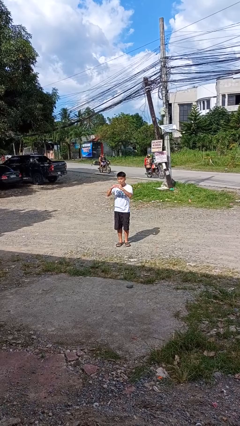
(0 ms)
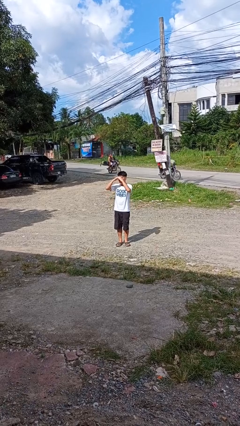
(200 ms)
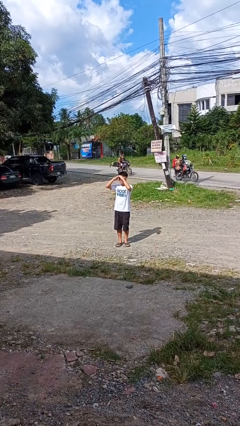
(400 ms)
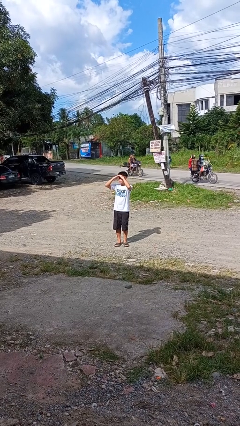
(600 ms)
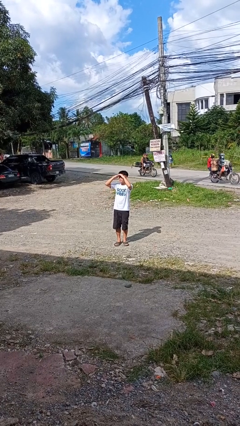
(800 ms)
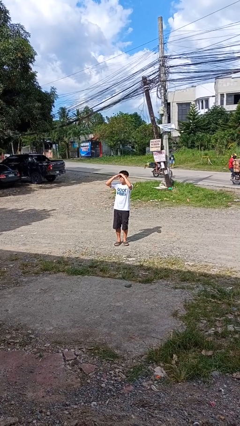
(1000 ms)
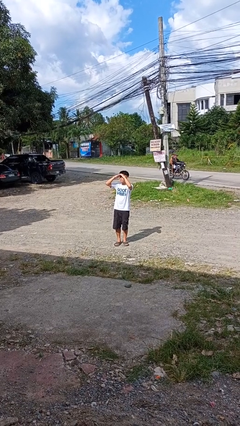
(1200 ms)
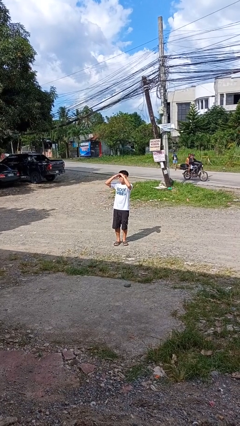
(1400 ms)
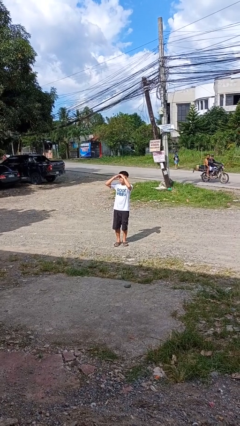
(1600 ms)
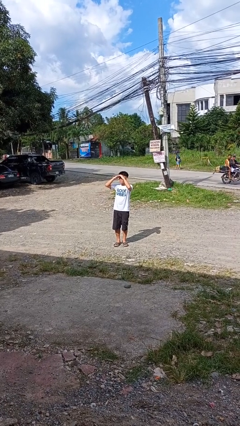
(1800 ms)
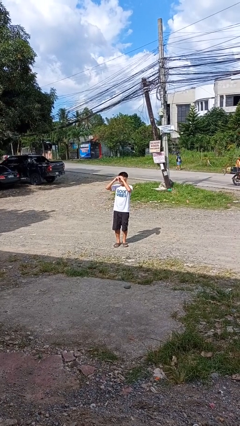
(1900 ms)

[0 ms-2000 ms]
person shades eyes

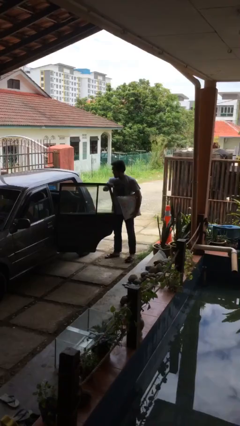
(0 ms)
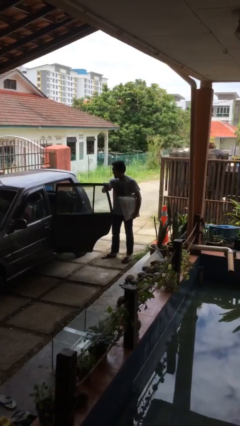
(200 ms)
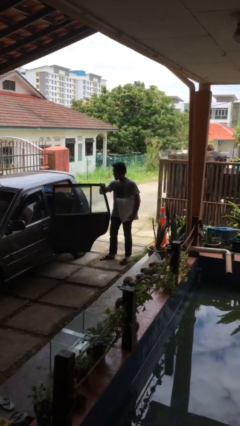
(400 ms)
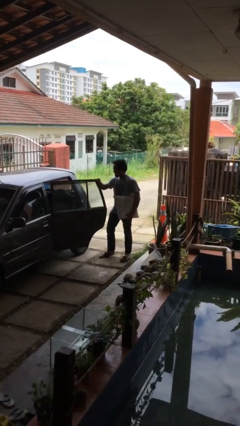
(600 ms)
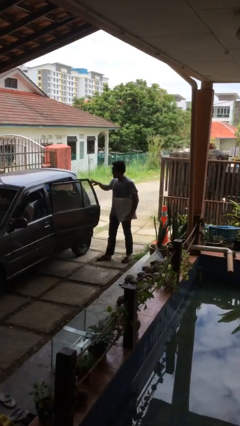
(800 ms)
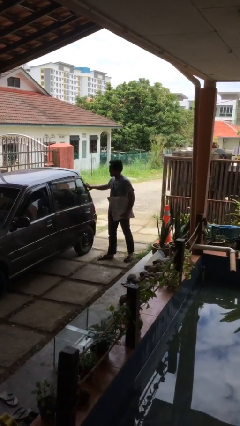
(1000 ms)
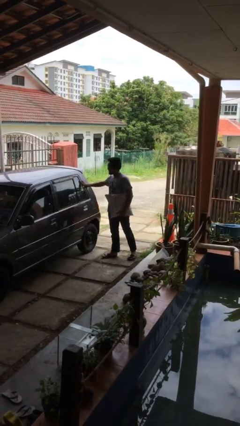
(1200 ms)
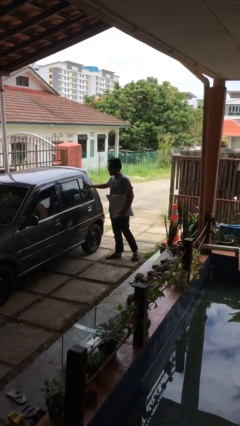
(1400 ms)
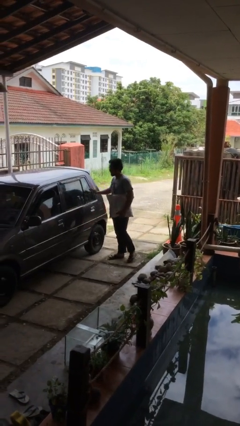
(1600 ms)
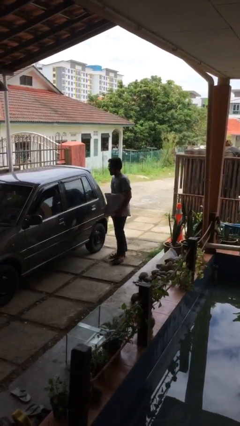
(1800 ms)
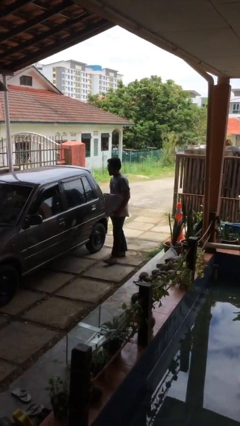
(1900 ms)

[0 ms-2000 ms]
person closes car door

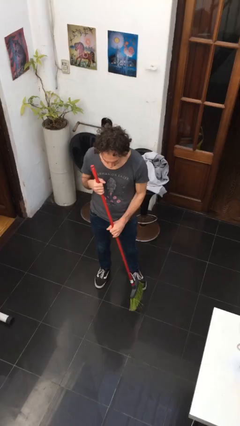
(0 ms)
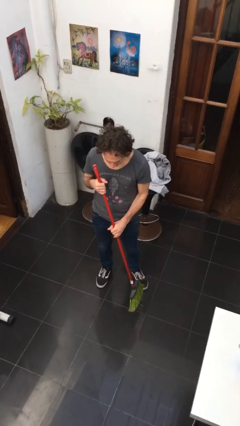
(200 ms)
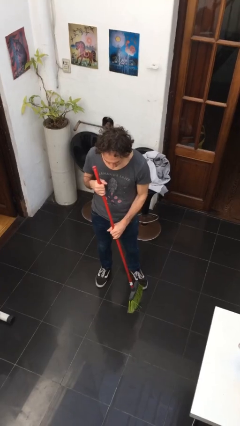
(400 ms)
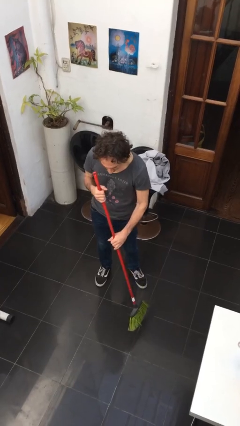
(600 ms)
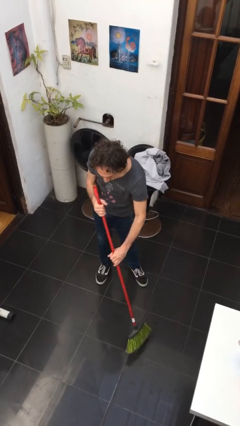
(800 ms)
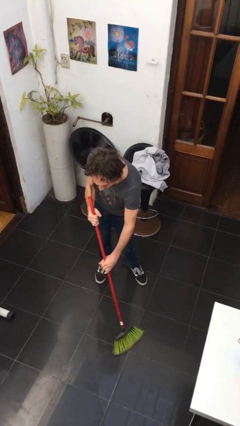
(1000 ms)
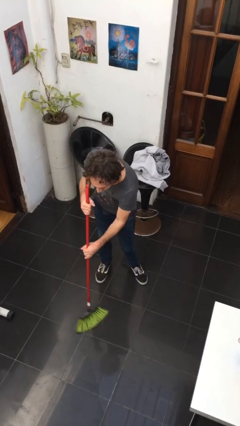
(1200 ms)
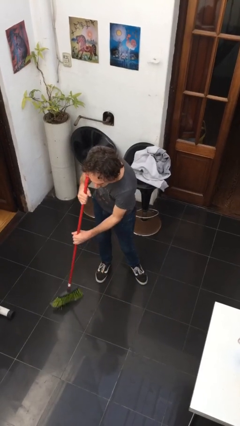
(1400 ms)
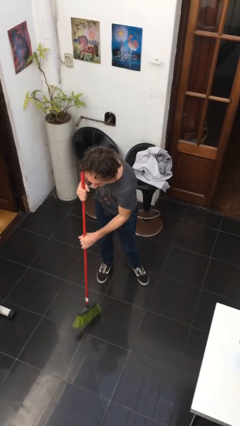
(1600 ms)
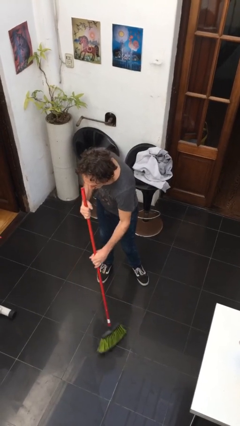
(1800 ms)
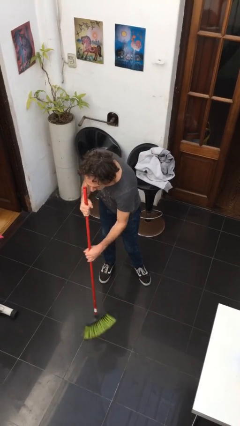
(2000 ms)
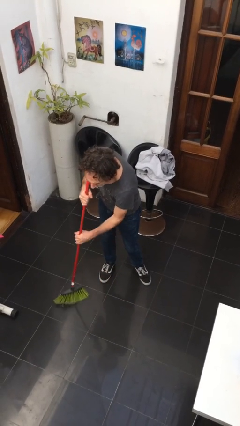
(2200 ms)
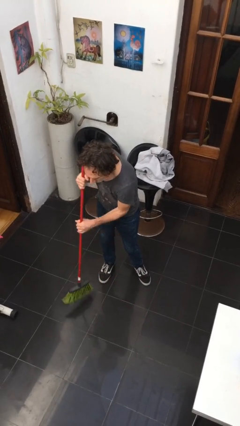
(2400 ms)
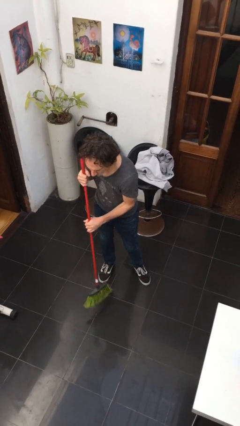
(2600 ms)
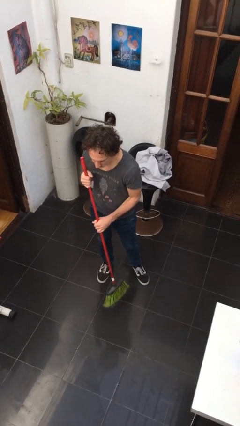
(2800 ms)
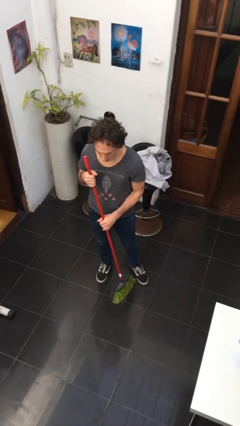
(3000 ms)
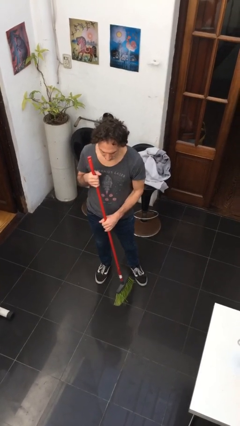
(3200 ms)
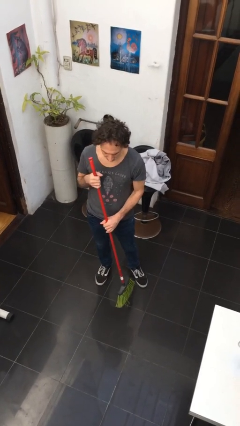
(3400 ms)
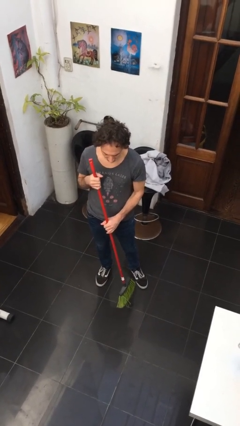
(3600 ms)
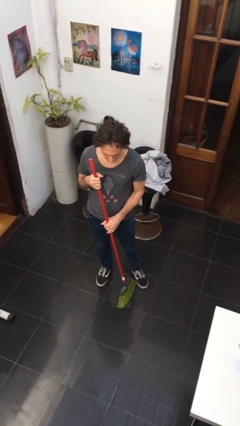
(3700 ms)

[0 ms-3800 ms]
person sweeps floor

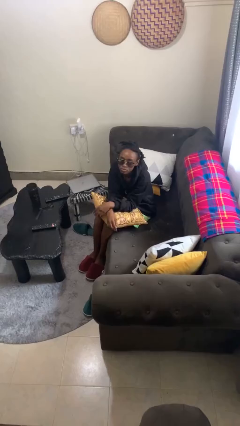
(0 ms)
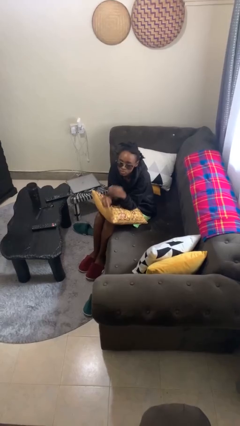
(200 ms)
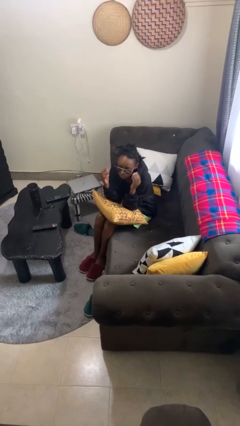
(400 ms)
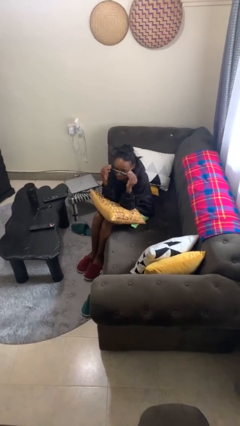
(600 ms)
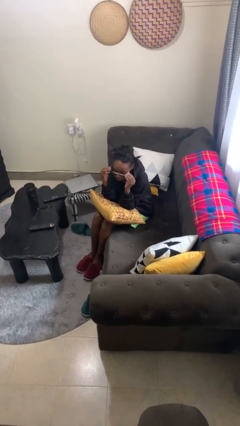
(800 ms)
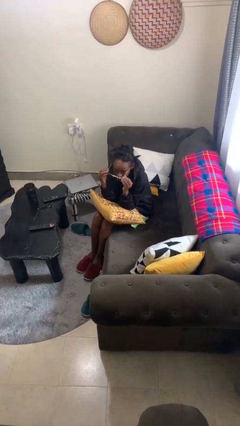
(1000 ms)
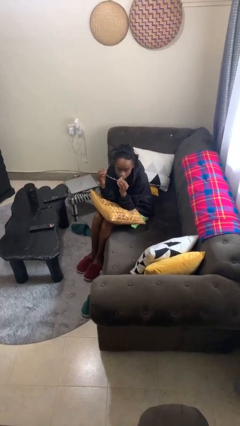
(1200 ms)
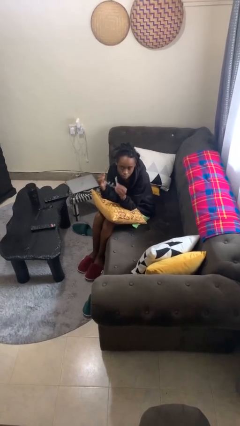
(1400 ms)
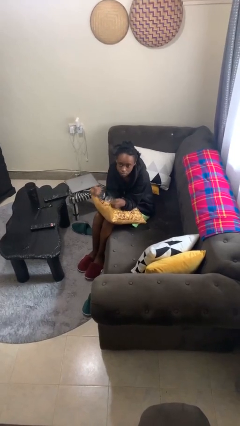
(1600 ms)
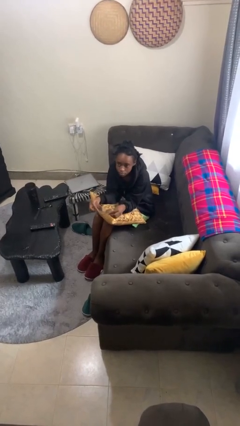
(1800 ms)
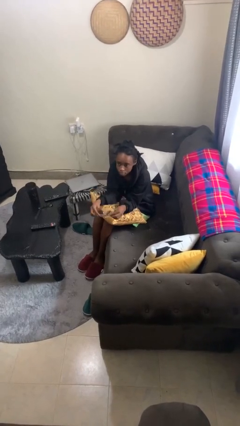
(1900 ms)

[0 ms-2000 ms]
person takes off sunglasses

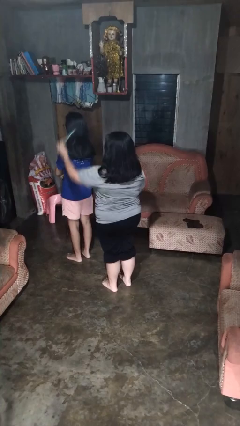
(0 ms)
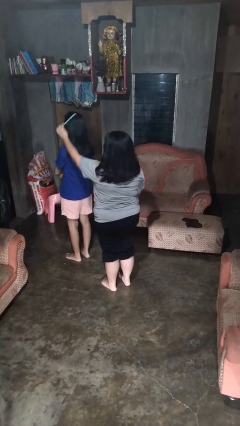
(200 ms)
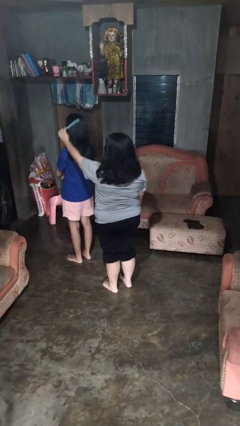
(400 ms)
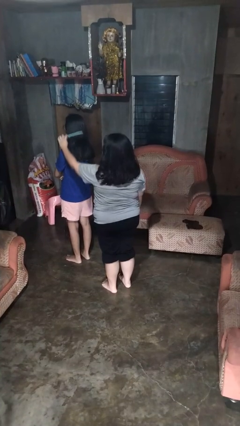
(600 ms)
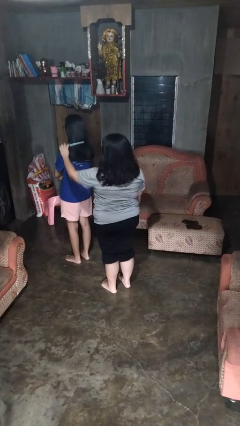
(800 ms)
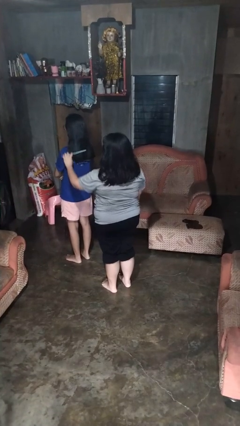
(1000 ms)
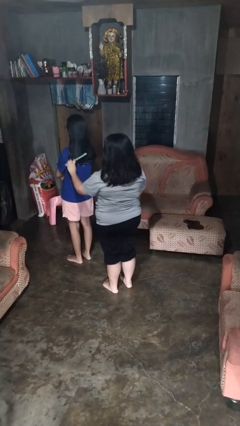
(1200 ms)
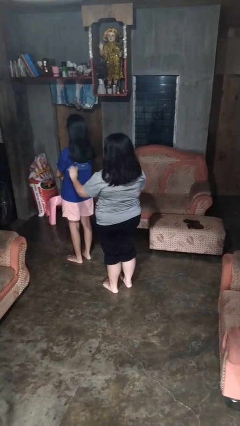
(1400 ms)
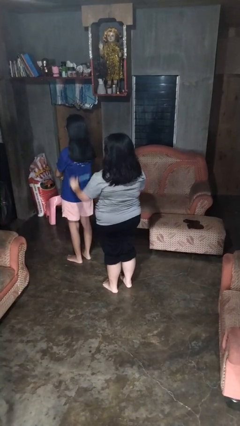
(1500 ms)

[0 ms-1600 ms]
person brushes hair of person

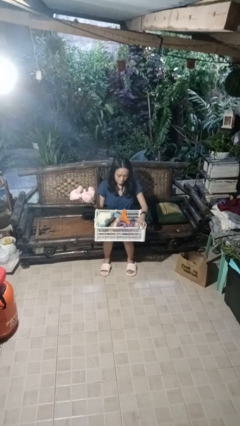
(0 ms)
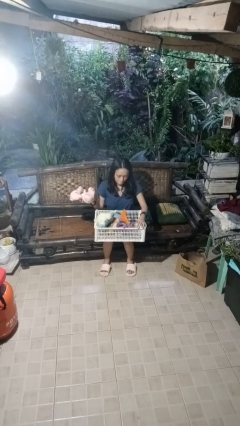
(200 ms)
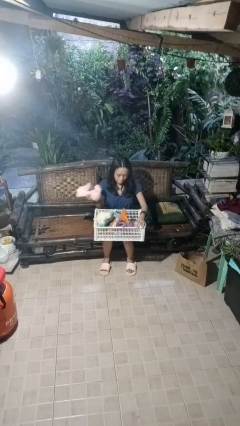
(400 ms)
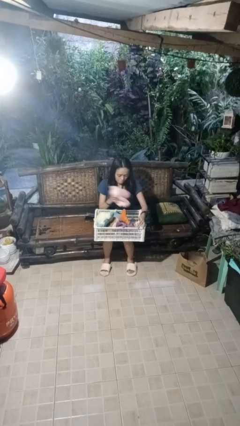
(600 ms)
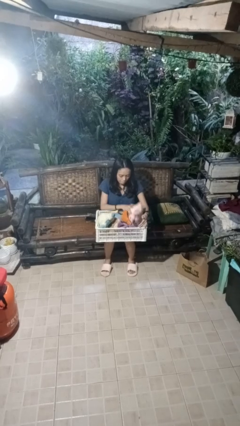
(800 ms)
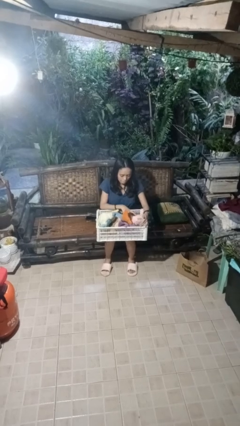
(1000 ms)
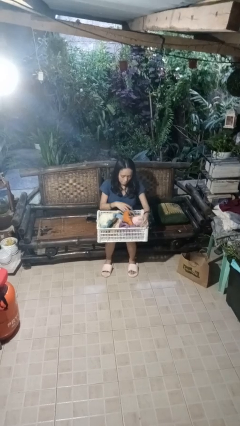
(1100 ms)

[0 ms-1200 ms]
person puts object into basket

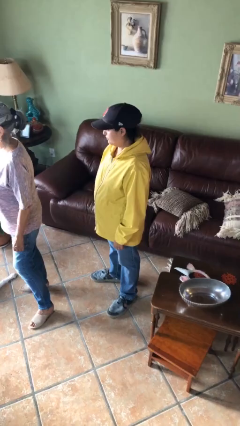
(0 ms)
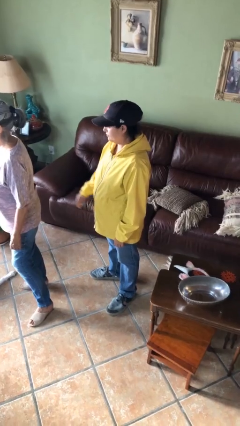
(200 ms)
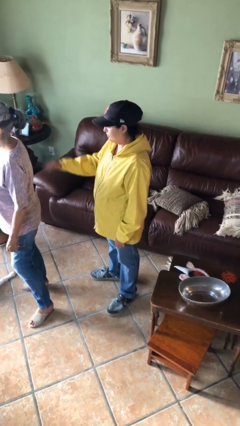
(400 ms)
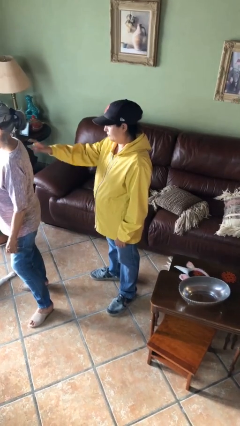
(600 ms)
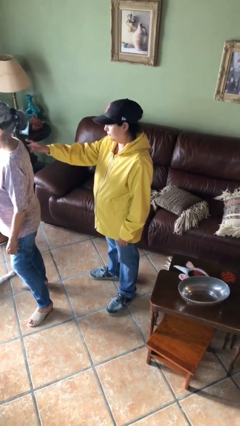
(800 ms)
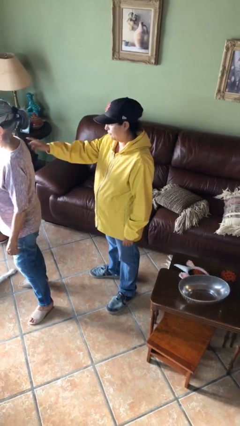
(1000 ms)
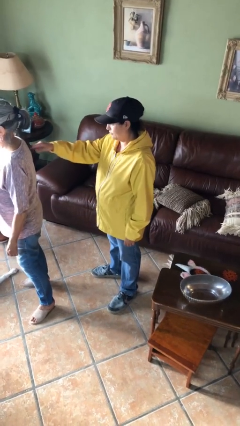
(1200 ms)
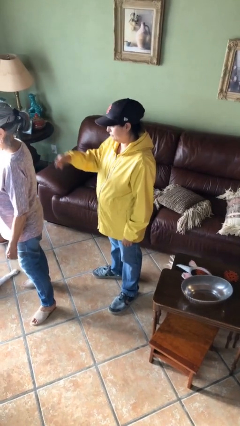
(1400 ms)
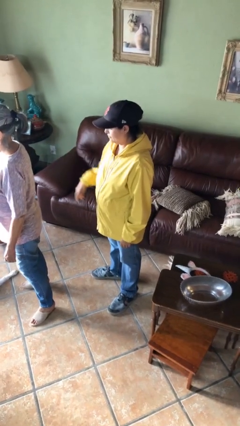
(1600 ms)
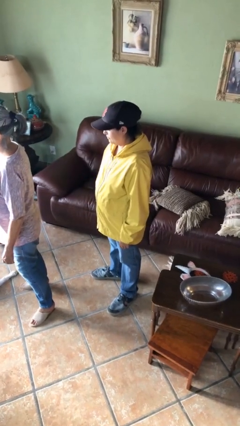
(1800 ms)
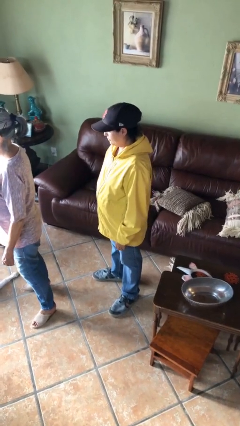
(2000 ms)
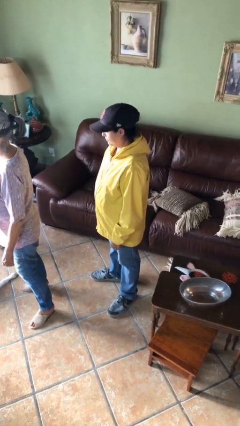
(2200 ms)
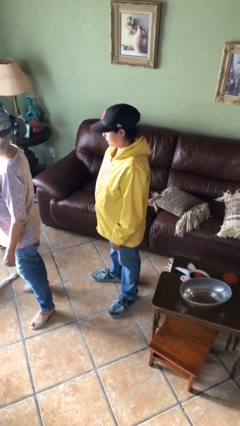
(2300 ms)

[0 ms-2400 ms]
person touches back of person

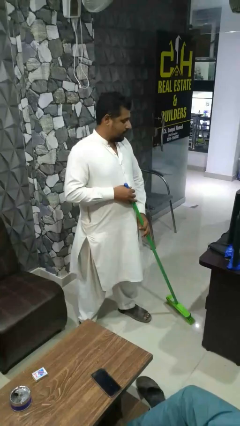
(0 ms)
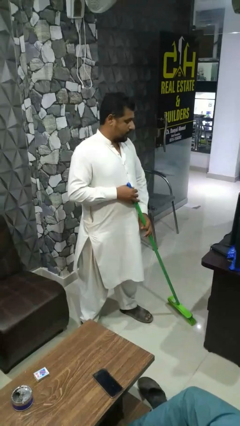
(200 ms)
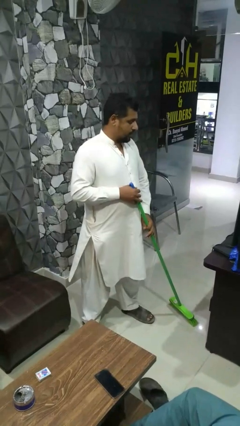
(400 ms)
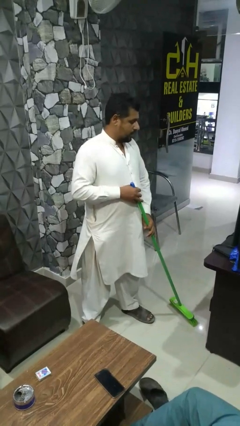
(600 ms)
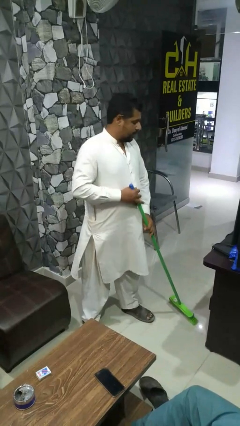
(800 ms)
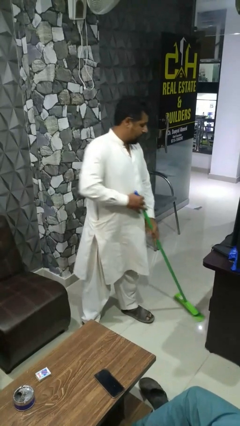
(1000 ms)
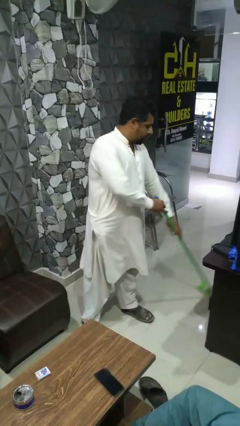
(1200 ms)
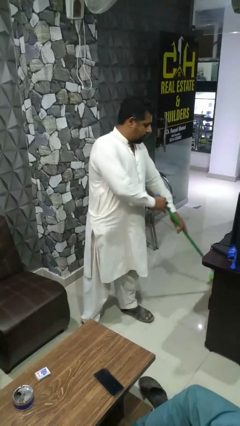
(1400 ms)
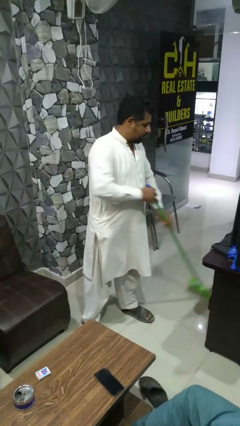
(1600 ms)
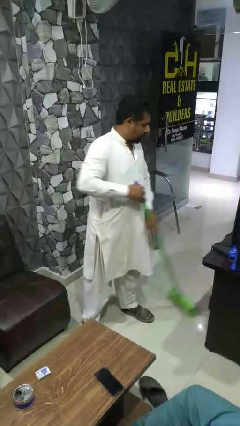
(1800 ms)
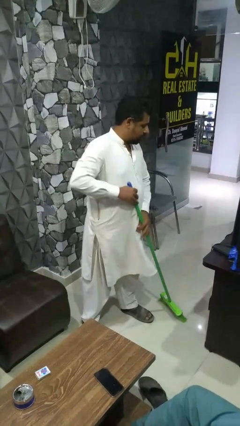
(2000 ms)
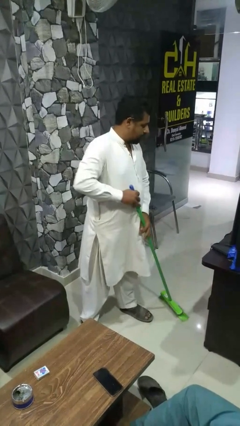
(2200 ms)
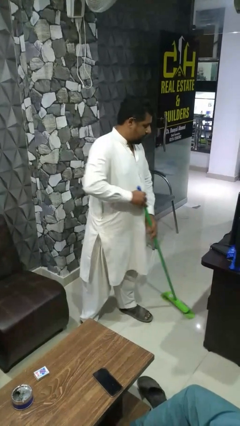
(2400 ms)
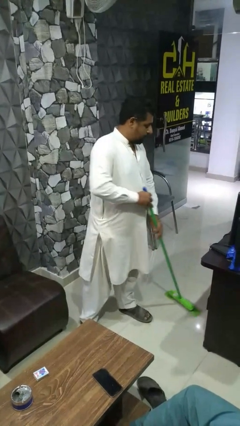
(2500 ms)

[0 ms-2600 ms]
person mops
